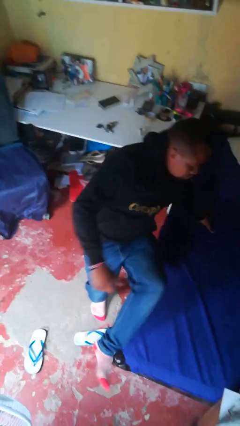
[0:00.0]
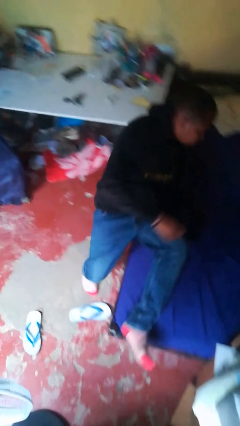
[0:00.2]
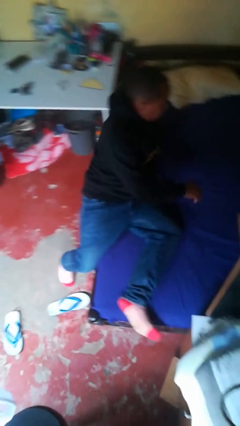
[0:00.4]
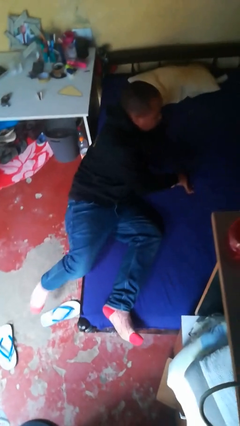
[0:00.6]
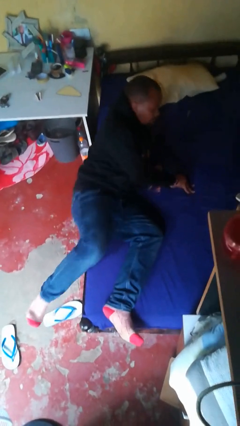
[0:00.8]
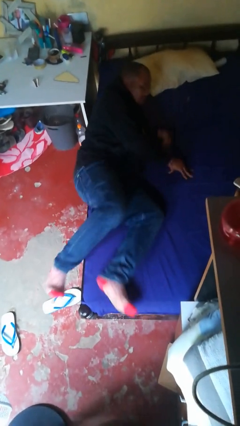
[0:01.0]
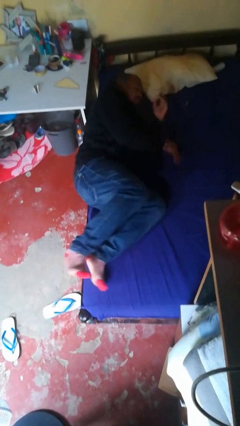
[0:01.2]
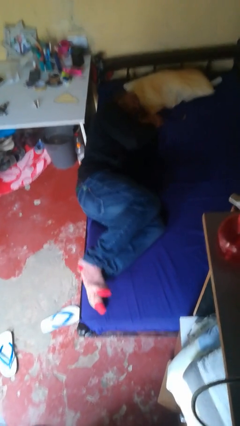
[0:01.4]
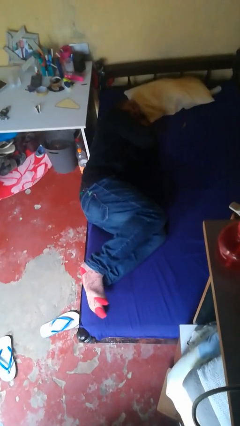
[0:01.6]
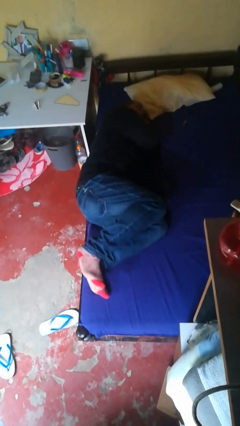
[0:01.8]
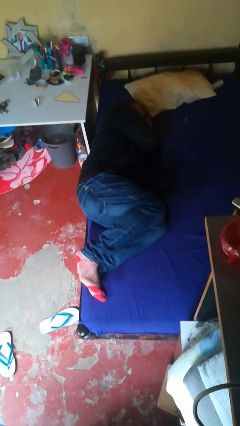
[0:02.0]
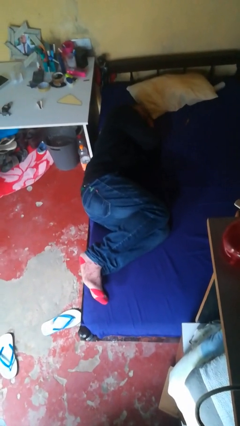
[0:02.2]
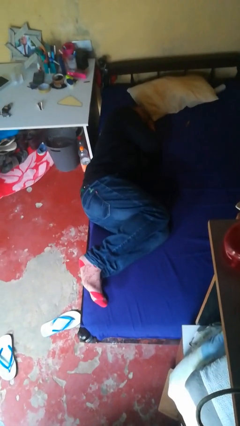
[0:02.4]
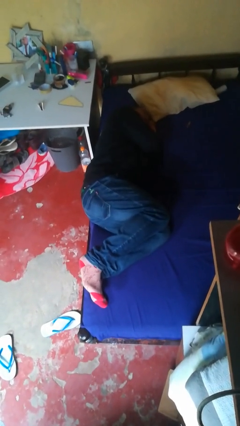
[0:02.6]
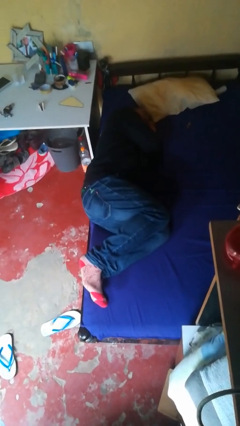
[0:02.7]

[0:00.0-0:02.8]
person lies down on bed

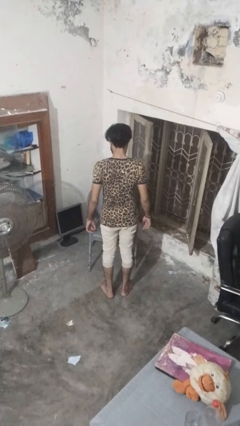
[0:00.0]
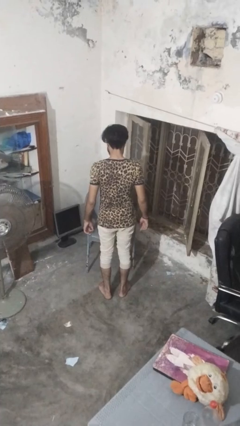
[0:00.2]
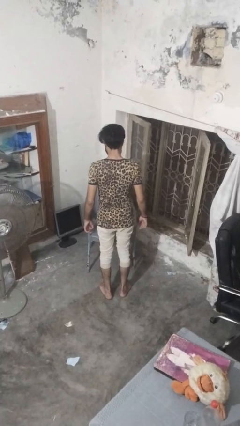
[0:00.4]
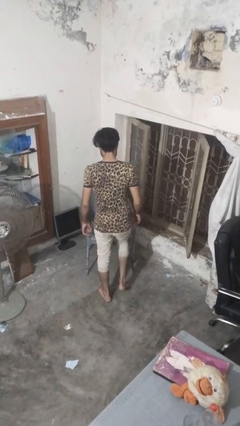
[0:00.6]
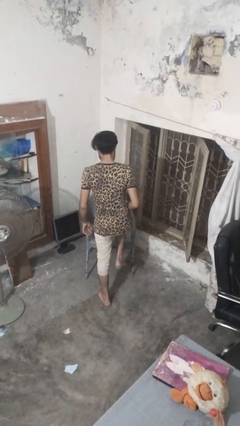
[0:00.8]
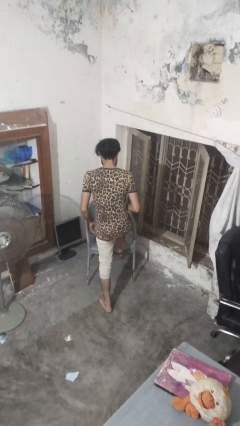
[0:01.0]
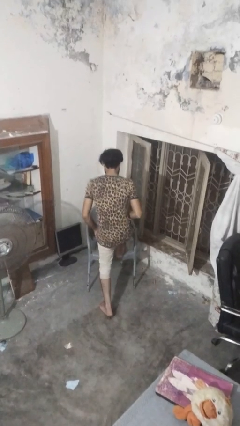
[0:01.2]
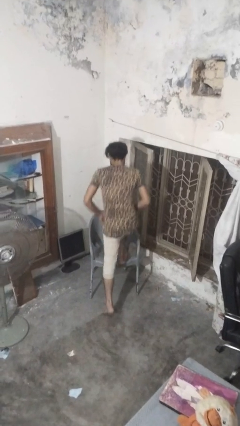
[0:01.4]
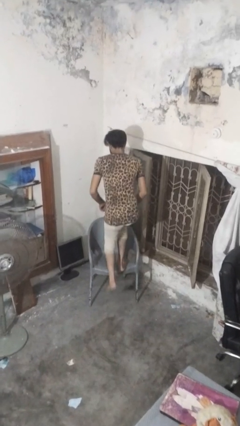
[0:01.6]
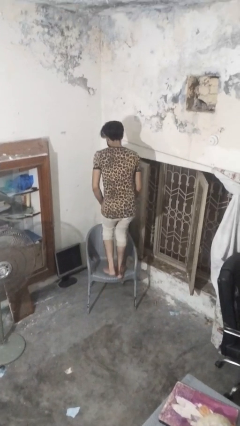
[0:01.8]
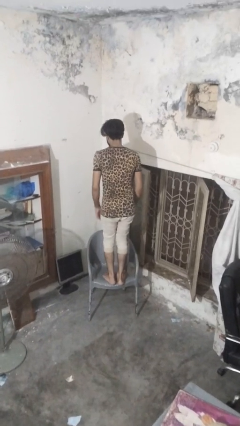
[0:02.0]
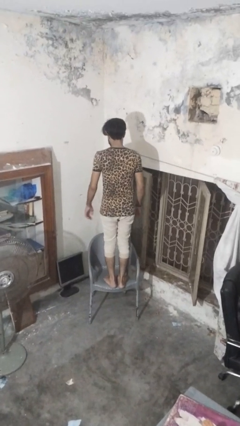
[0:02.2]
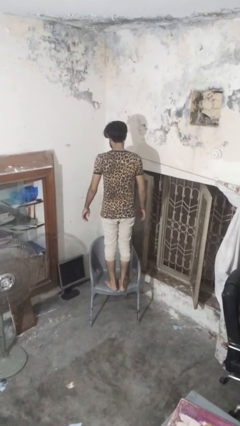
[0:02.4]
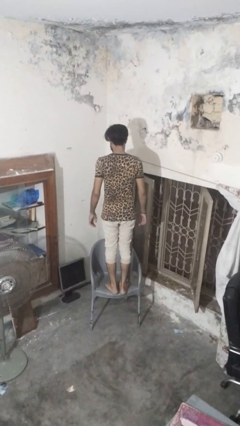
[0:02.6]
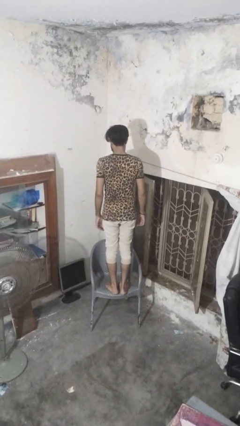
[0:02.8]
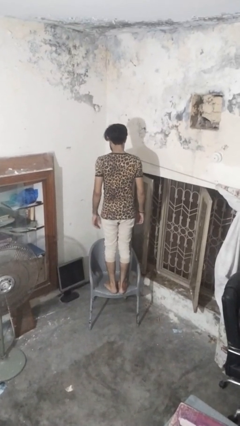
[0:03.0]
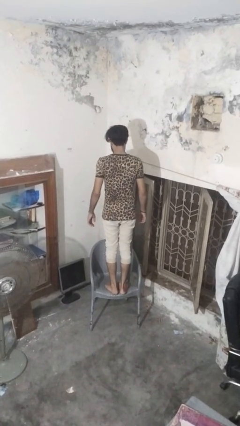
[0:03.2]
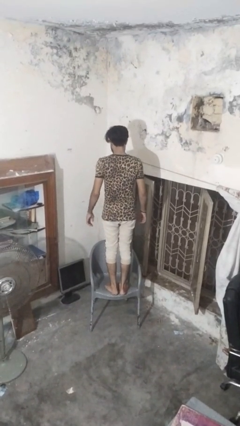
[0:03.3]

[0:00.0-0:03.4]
person climbs on chair

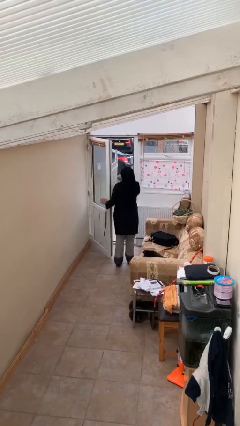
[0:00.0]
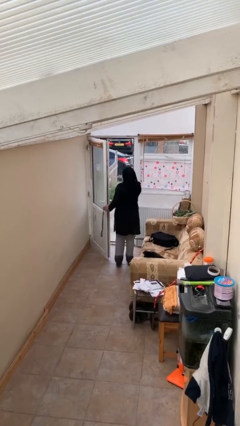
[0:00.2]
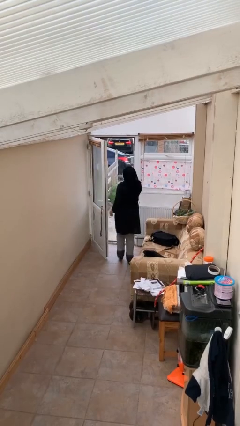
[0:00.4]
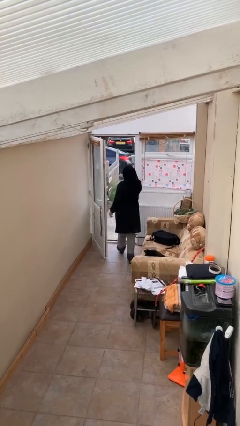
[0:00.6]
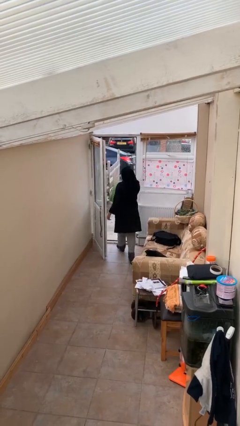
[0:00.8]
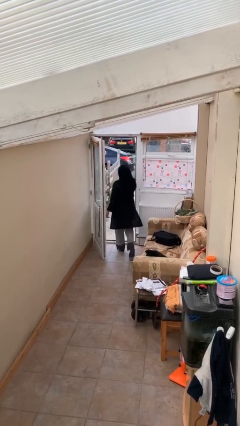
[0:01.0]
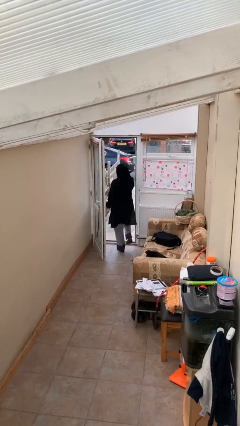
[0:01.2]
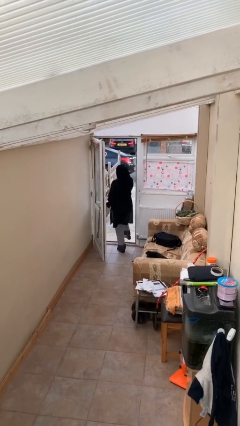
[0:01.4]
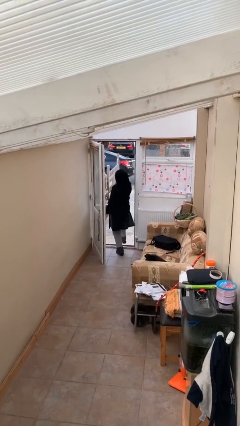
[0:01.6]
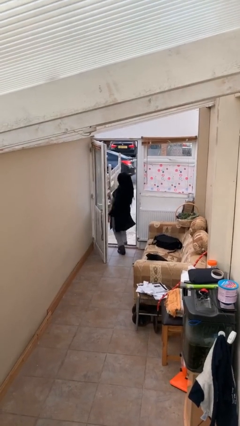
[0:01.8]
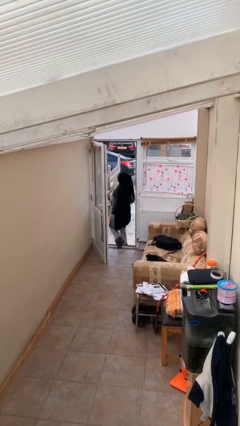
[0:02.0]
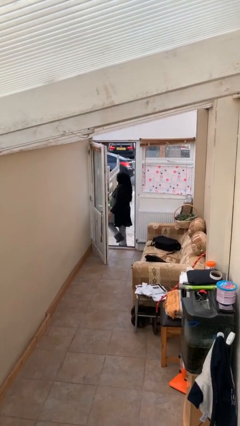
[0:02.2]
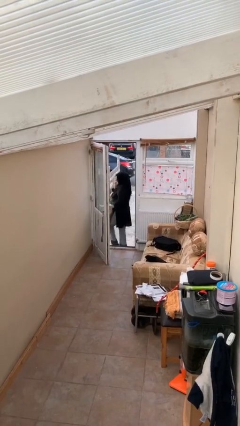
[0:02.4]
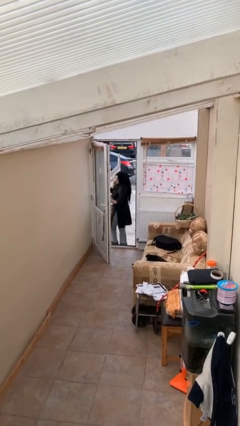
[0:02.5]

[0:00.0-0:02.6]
person exits scene through structure

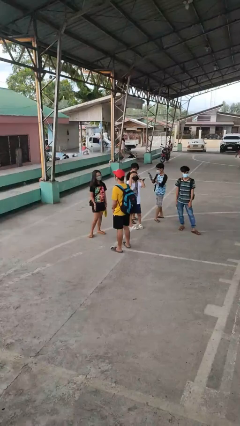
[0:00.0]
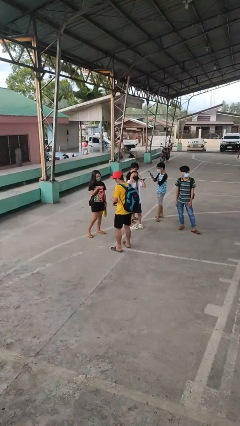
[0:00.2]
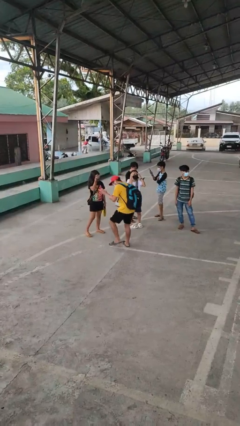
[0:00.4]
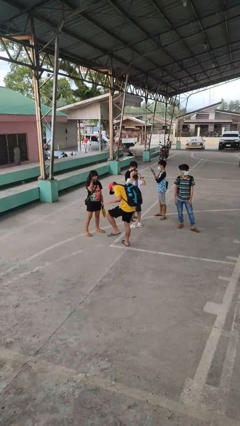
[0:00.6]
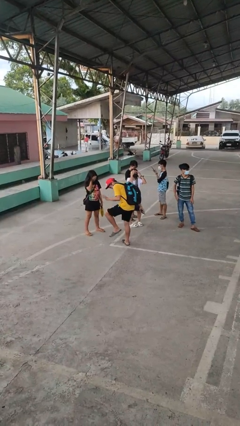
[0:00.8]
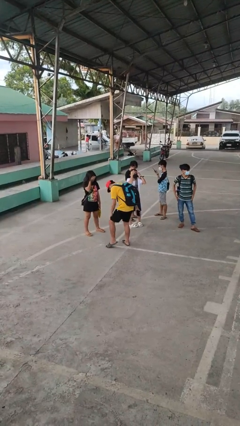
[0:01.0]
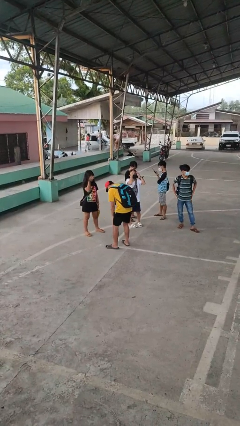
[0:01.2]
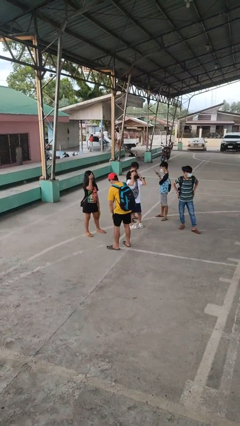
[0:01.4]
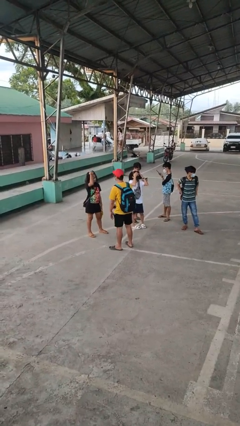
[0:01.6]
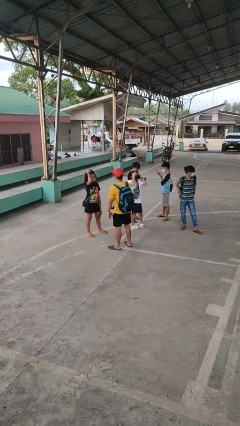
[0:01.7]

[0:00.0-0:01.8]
person laughs with person

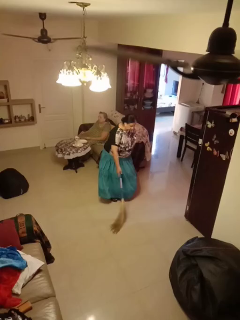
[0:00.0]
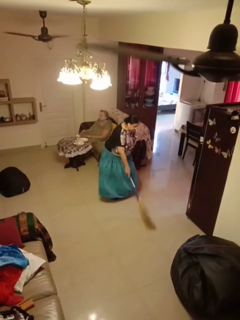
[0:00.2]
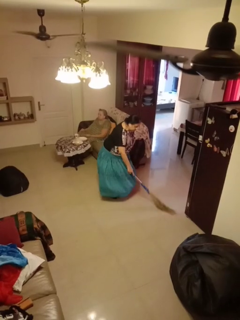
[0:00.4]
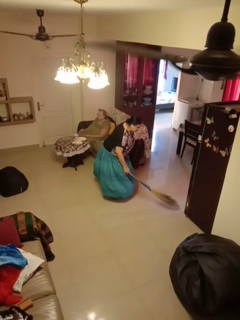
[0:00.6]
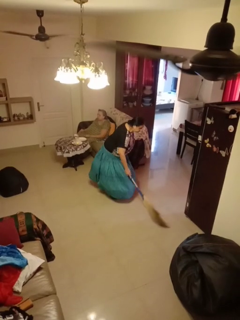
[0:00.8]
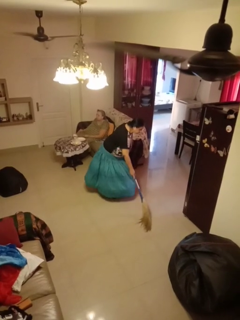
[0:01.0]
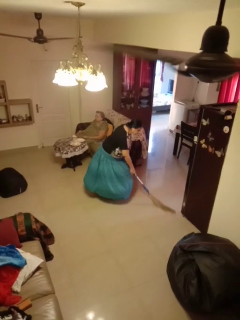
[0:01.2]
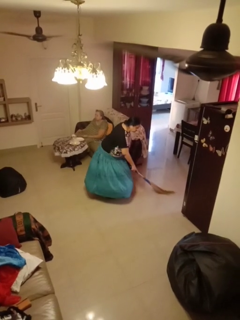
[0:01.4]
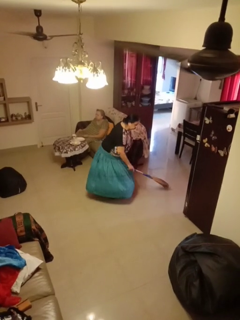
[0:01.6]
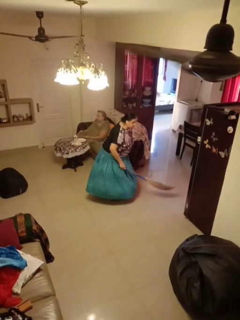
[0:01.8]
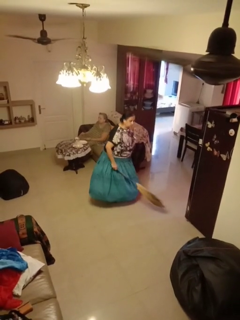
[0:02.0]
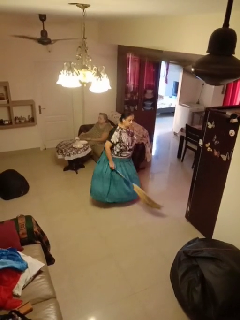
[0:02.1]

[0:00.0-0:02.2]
person sweeps floor

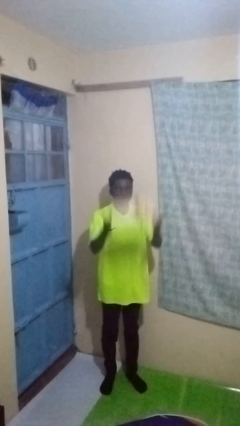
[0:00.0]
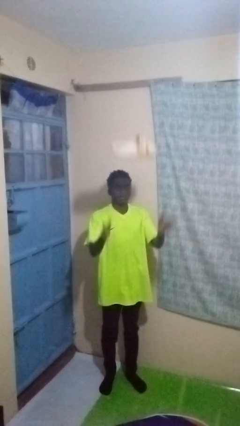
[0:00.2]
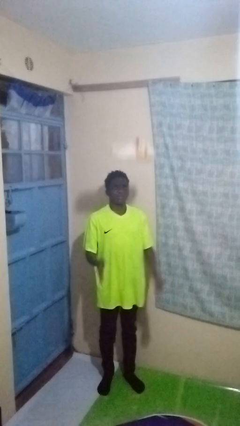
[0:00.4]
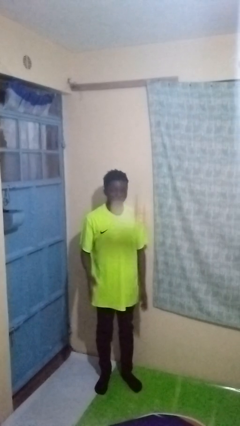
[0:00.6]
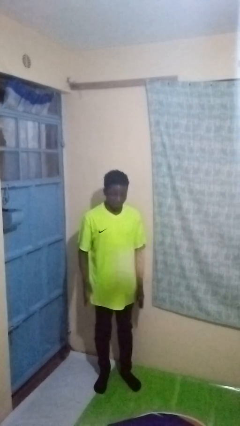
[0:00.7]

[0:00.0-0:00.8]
person throws object into air

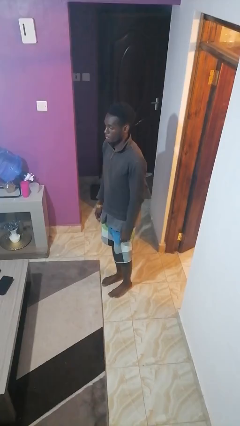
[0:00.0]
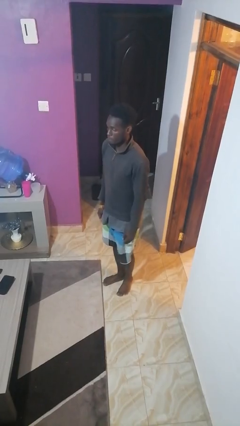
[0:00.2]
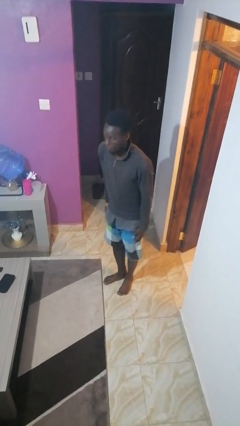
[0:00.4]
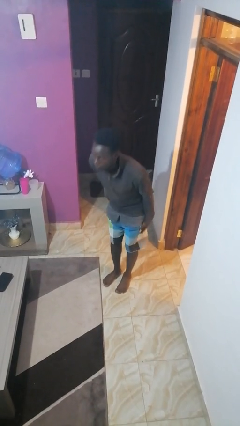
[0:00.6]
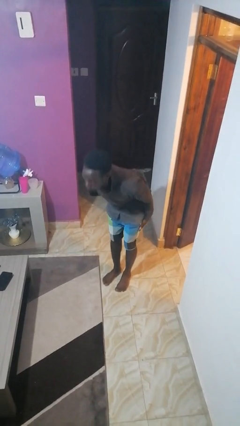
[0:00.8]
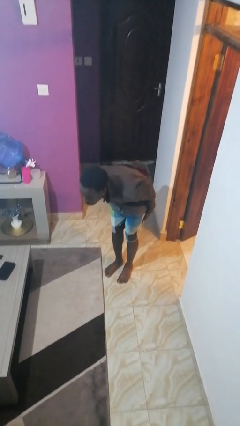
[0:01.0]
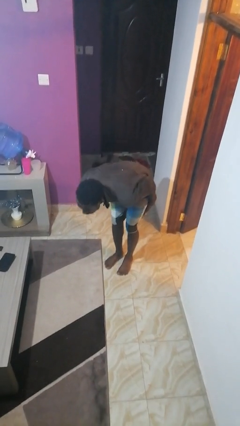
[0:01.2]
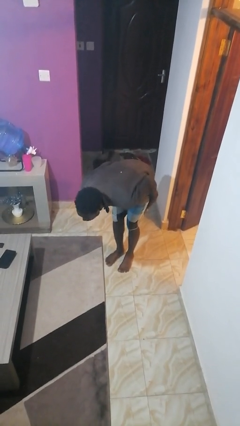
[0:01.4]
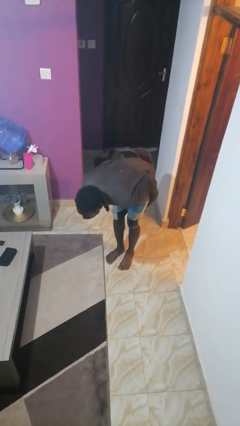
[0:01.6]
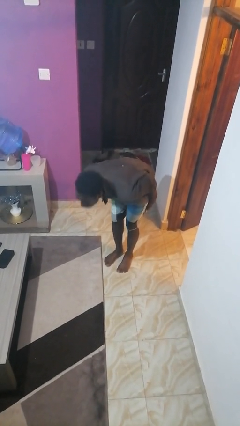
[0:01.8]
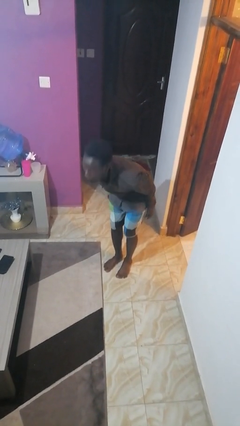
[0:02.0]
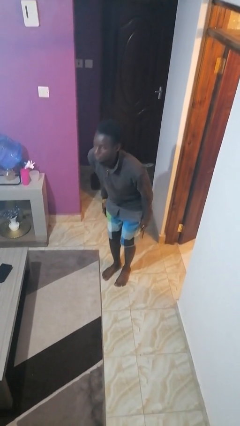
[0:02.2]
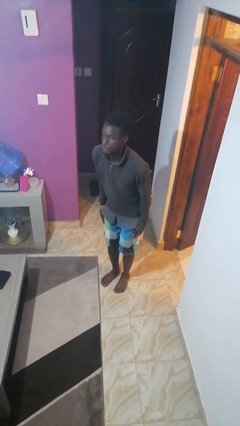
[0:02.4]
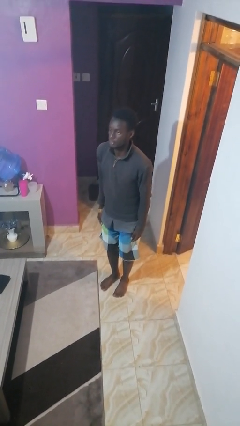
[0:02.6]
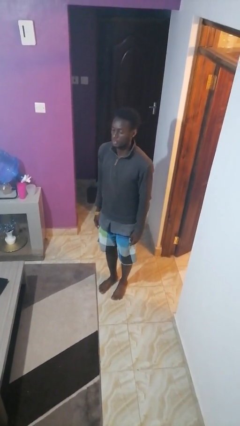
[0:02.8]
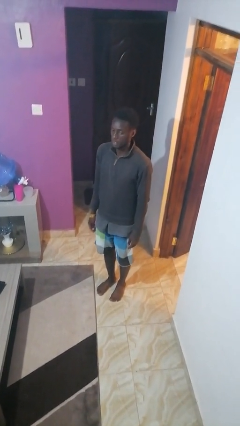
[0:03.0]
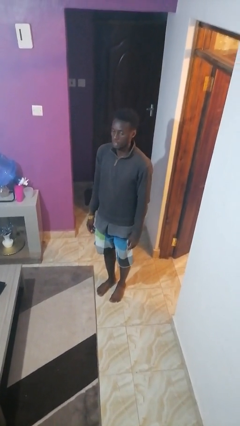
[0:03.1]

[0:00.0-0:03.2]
person bows

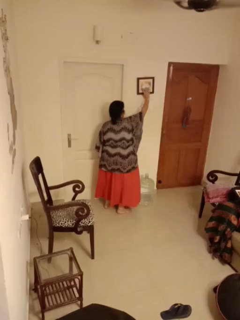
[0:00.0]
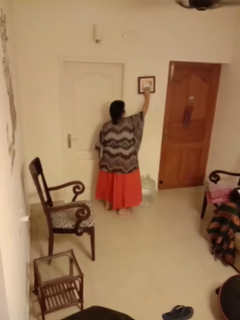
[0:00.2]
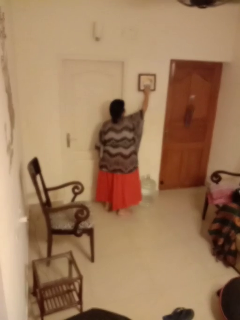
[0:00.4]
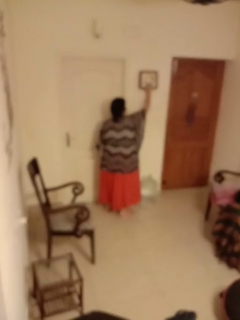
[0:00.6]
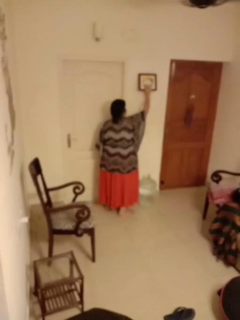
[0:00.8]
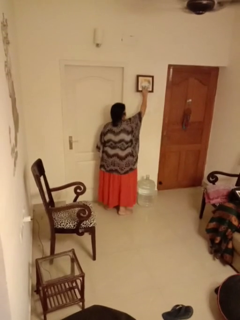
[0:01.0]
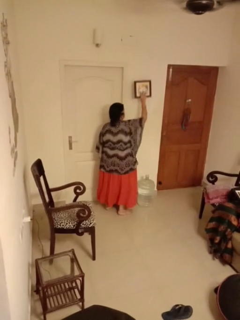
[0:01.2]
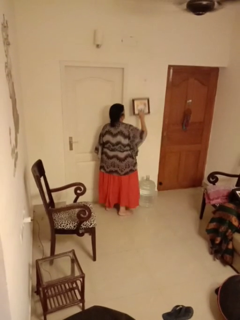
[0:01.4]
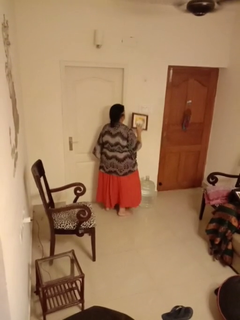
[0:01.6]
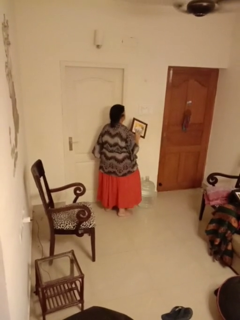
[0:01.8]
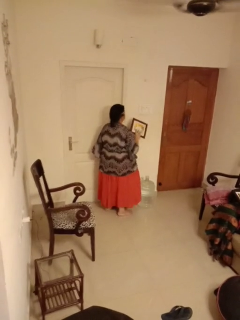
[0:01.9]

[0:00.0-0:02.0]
person takes down picture frame
